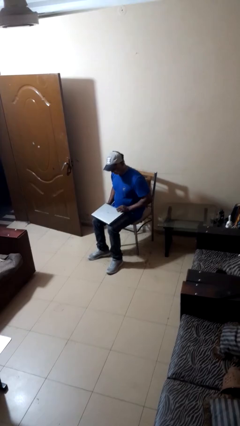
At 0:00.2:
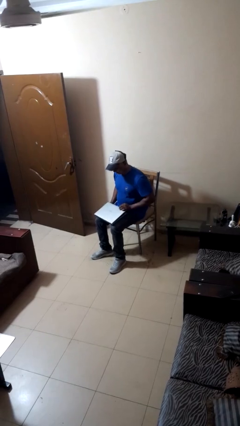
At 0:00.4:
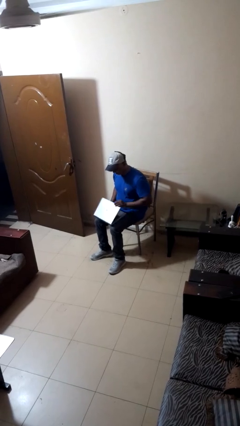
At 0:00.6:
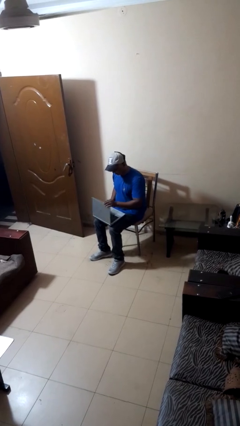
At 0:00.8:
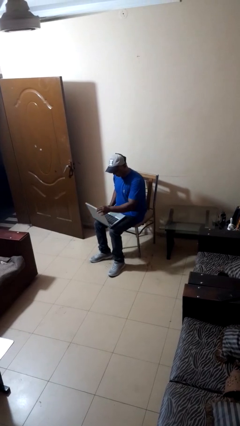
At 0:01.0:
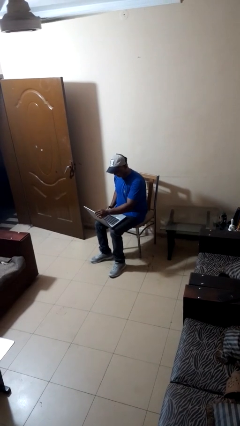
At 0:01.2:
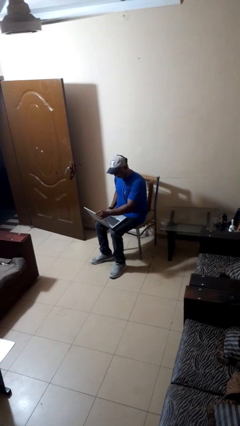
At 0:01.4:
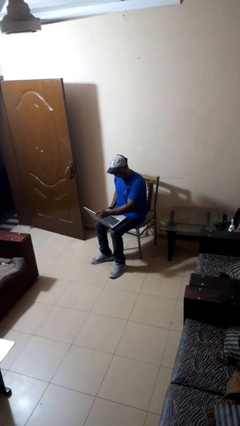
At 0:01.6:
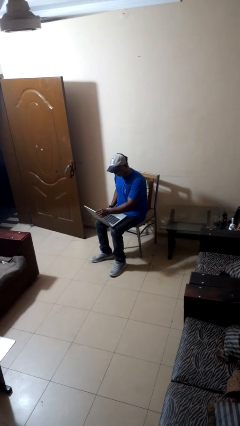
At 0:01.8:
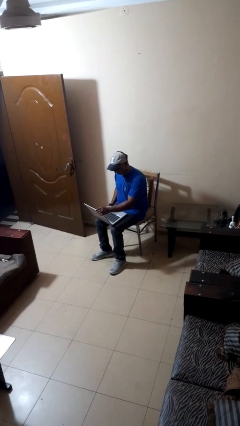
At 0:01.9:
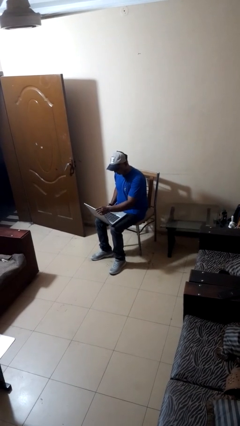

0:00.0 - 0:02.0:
person opens laptop

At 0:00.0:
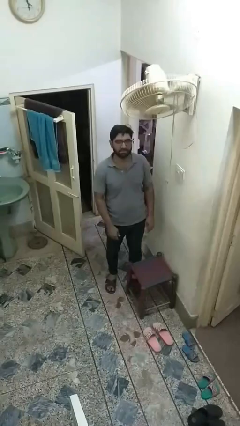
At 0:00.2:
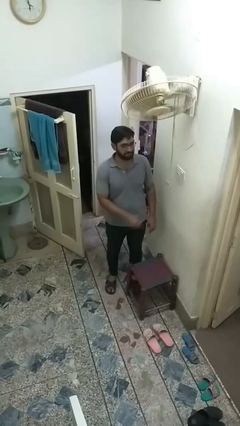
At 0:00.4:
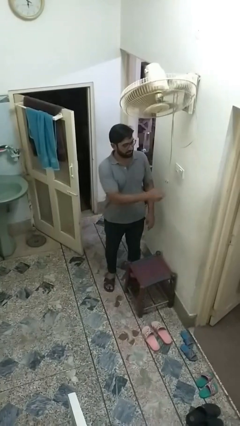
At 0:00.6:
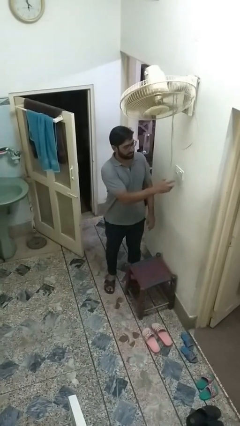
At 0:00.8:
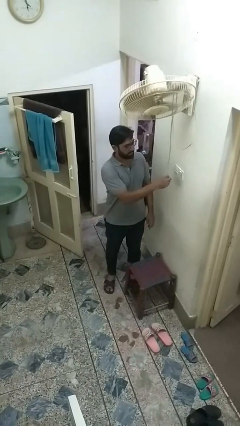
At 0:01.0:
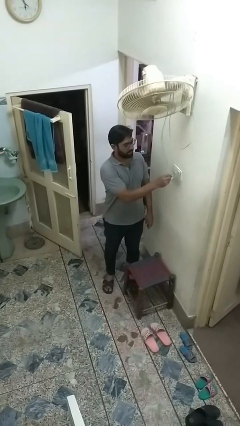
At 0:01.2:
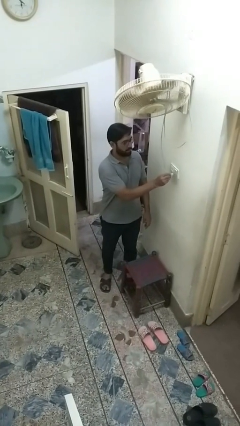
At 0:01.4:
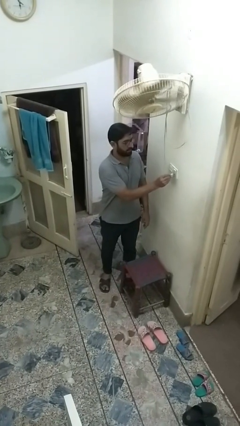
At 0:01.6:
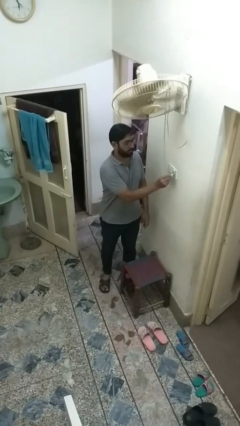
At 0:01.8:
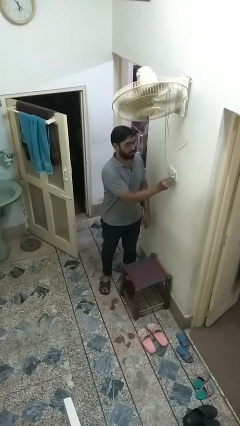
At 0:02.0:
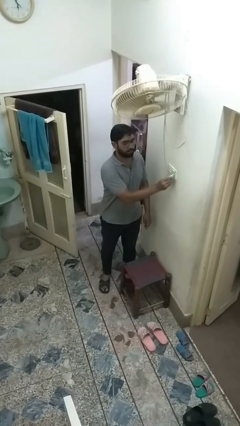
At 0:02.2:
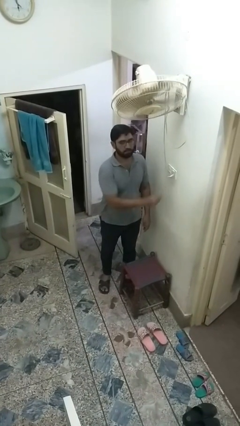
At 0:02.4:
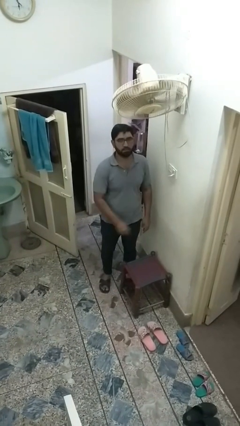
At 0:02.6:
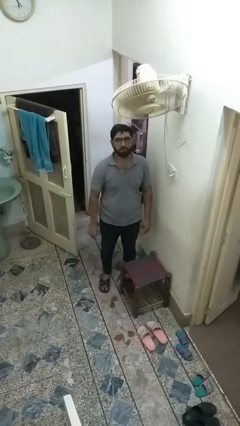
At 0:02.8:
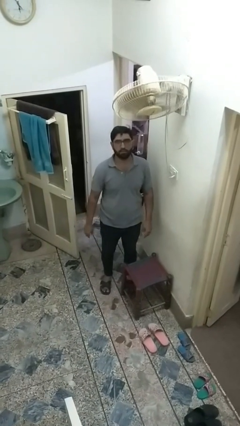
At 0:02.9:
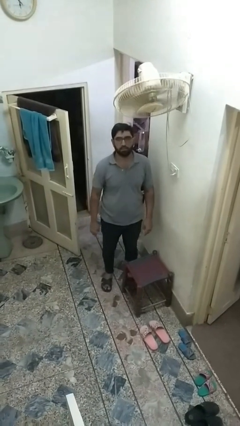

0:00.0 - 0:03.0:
person plugs into electrical socket

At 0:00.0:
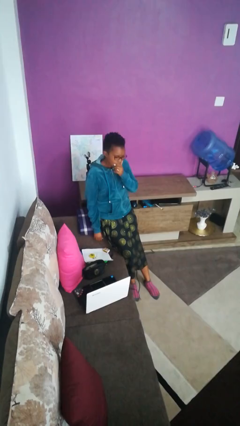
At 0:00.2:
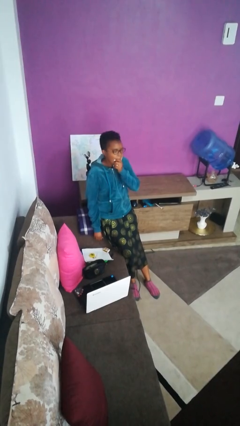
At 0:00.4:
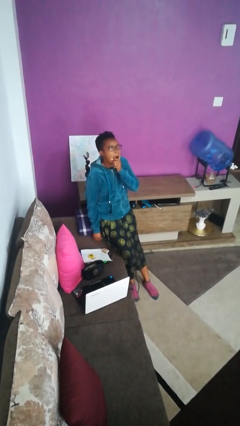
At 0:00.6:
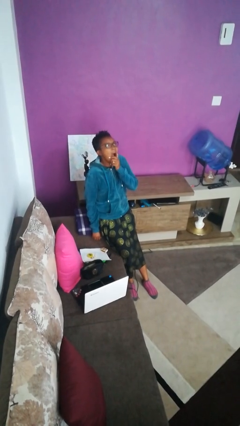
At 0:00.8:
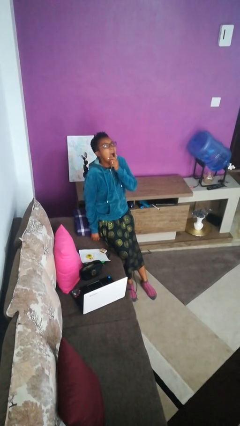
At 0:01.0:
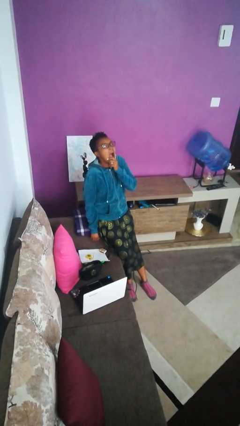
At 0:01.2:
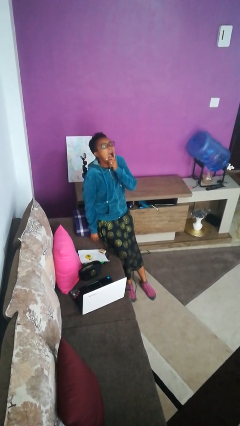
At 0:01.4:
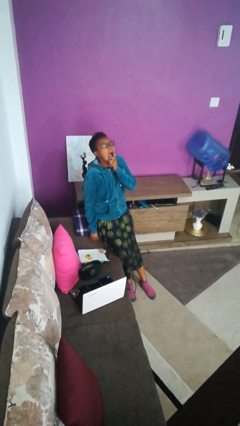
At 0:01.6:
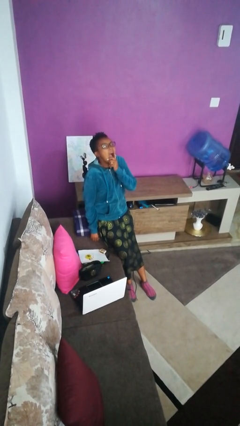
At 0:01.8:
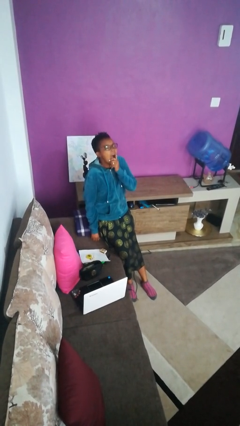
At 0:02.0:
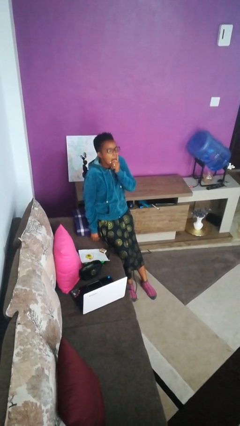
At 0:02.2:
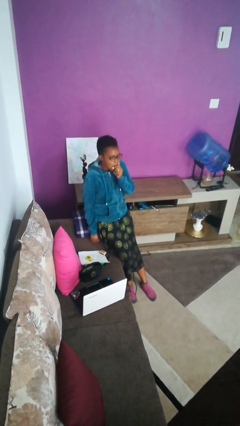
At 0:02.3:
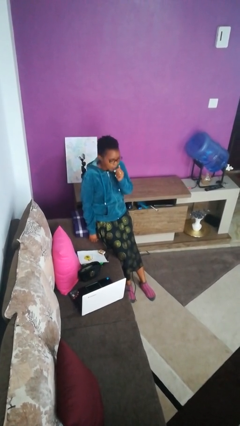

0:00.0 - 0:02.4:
person yawns

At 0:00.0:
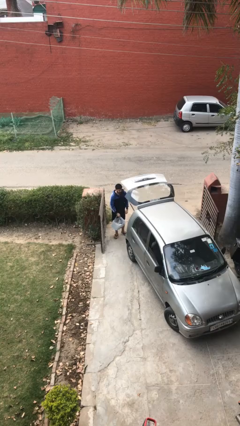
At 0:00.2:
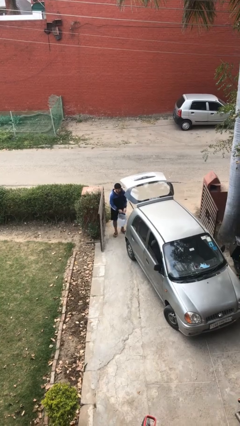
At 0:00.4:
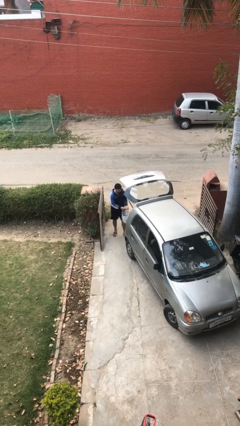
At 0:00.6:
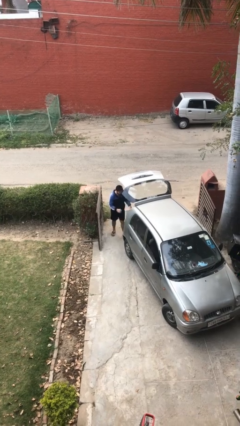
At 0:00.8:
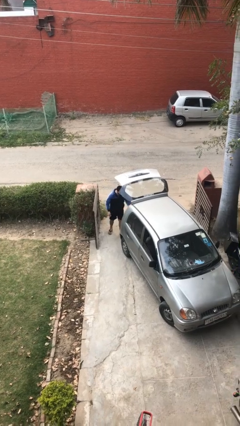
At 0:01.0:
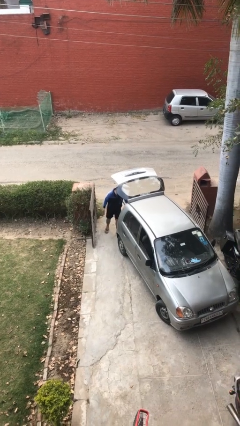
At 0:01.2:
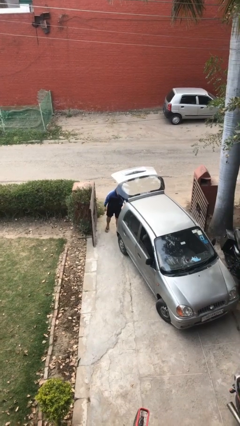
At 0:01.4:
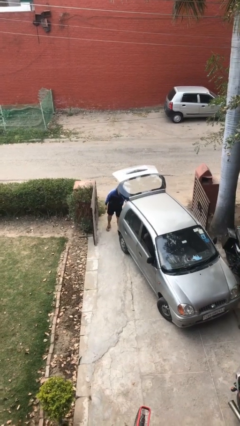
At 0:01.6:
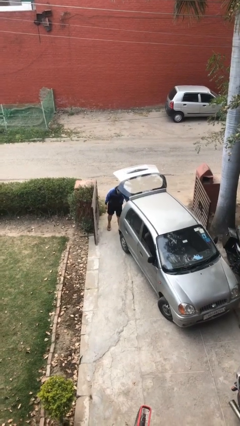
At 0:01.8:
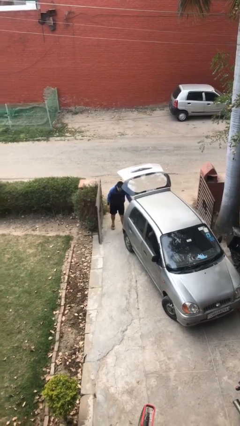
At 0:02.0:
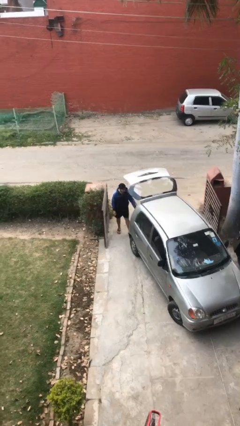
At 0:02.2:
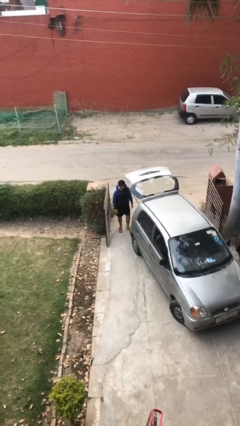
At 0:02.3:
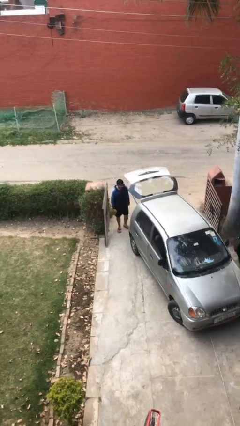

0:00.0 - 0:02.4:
person loads car

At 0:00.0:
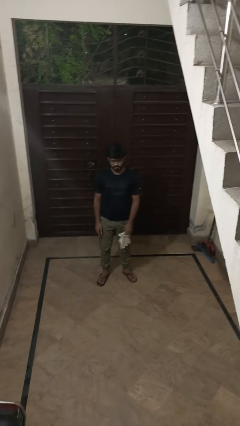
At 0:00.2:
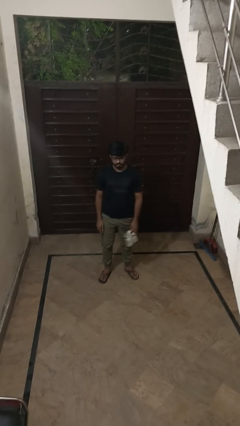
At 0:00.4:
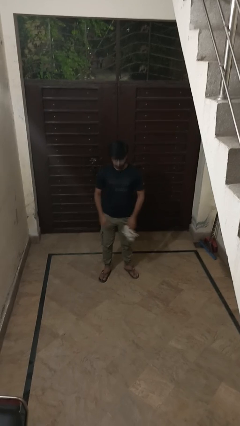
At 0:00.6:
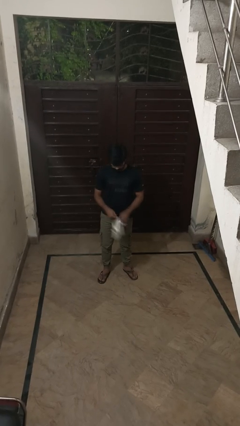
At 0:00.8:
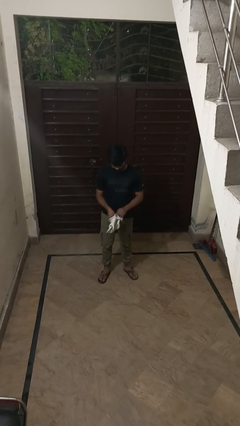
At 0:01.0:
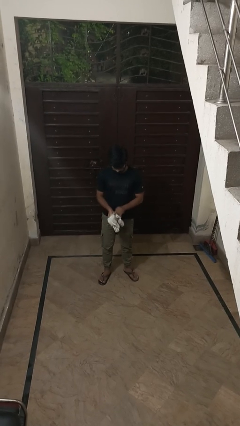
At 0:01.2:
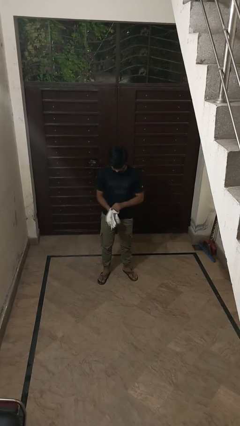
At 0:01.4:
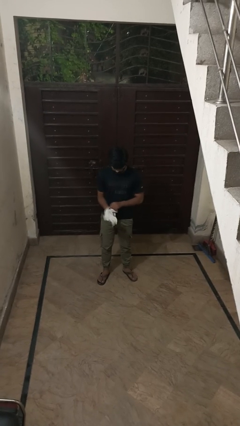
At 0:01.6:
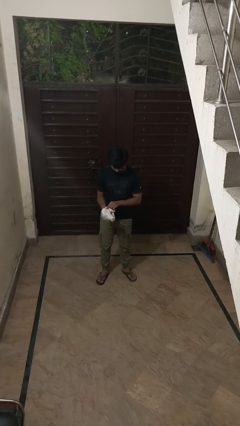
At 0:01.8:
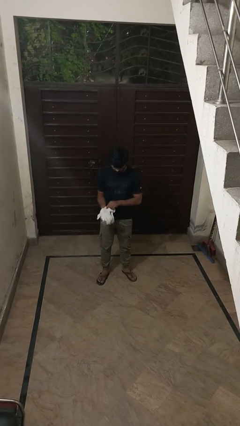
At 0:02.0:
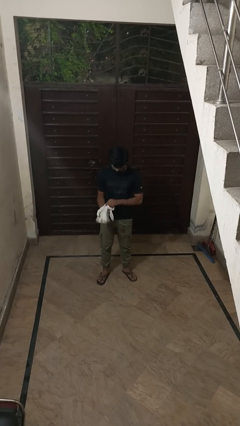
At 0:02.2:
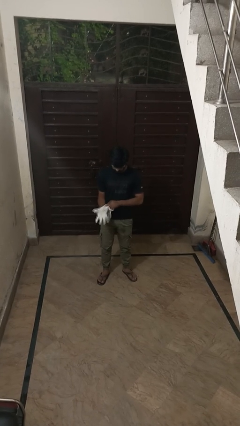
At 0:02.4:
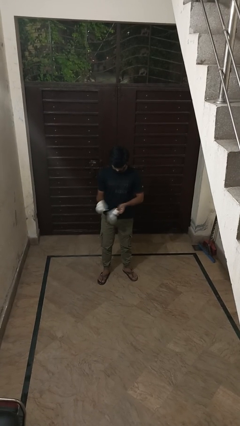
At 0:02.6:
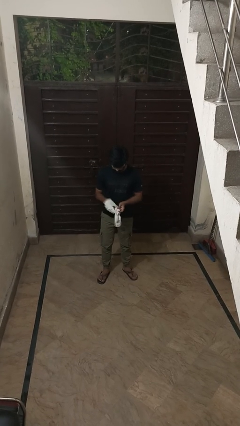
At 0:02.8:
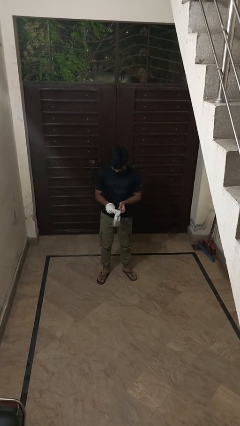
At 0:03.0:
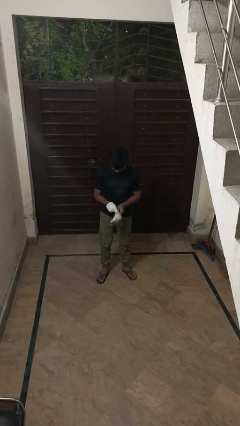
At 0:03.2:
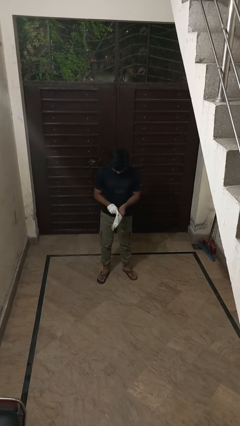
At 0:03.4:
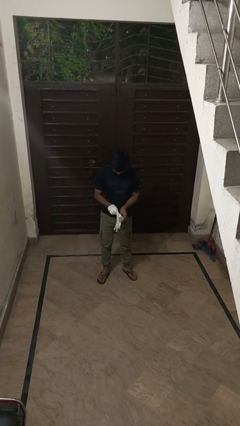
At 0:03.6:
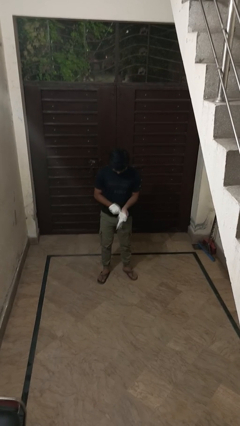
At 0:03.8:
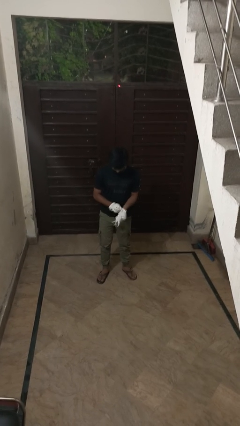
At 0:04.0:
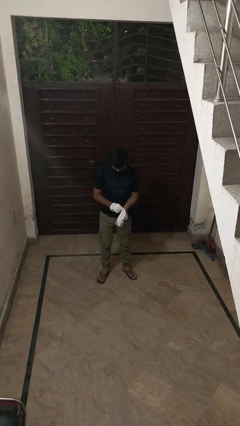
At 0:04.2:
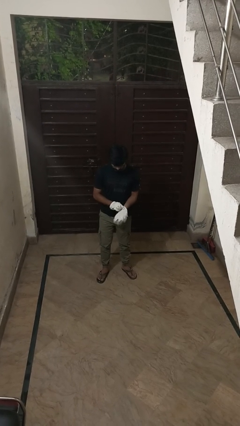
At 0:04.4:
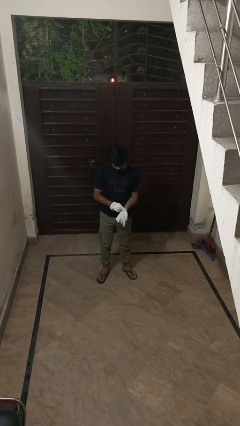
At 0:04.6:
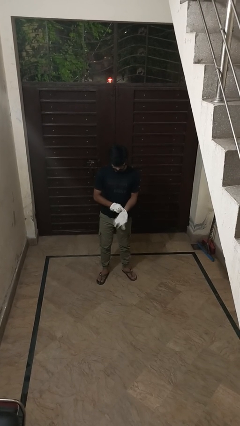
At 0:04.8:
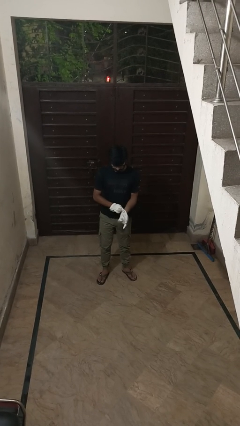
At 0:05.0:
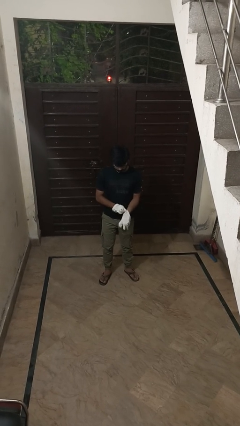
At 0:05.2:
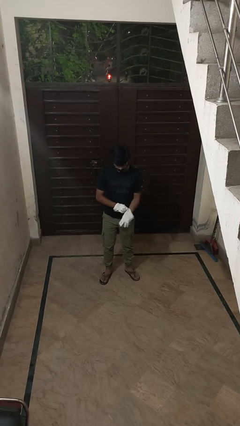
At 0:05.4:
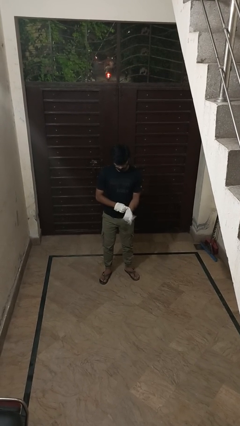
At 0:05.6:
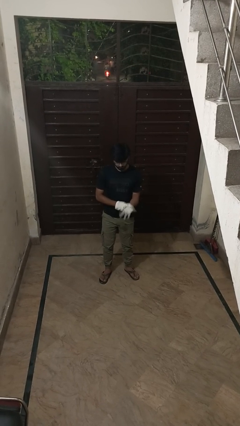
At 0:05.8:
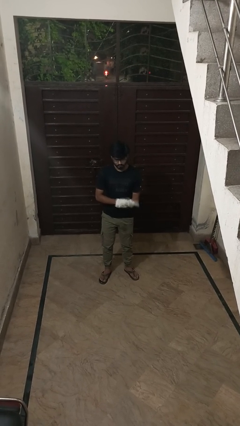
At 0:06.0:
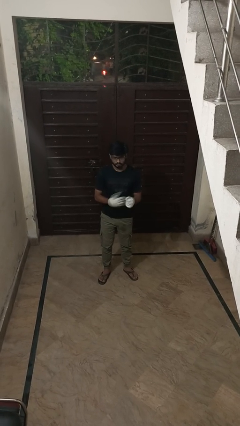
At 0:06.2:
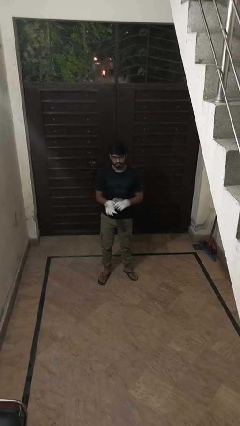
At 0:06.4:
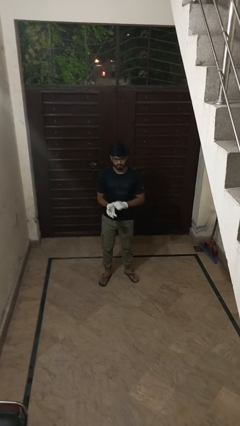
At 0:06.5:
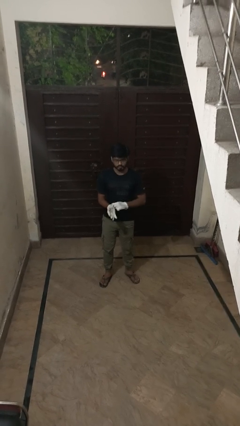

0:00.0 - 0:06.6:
person puts on gloves

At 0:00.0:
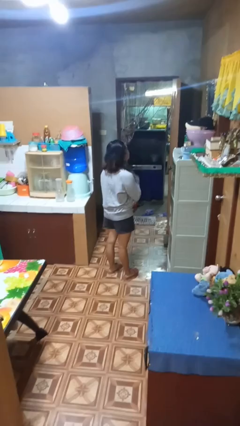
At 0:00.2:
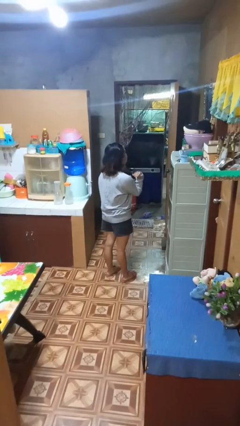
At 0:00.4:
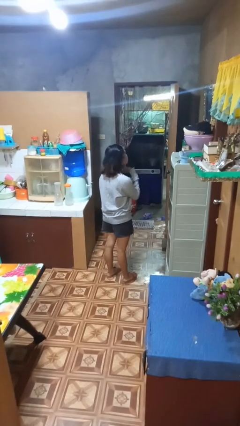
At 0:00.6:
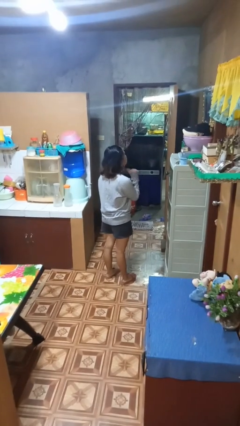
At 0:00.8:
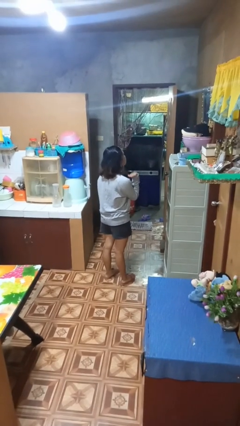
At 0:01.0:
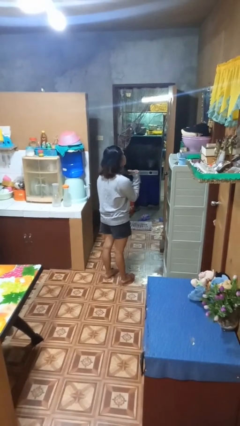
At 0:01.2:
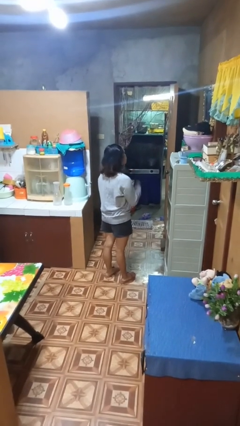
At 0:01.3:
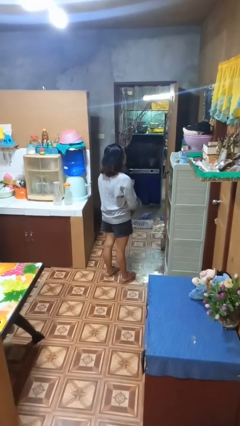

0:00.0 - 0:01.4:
person gestures cut
